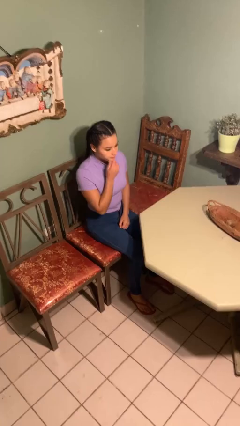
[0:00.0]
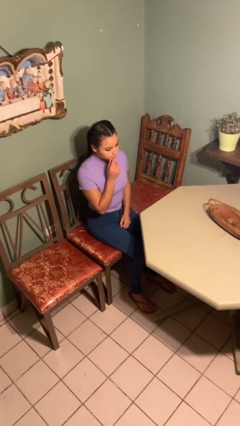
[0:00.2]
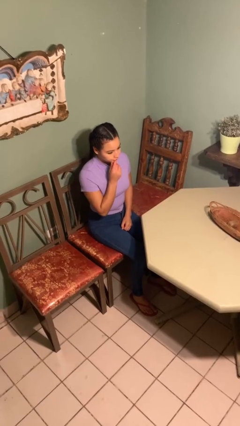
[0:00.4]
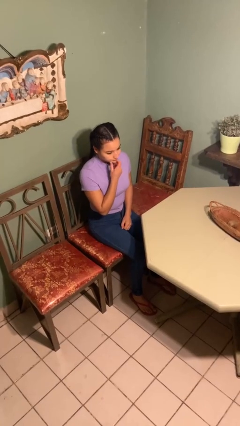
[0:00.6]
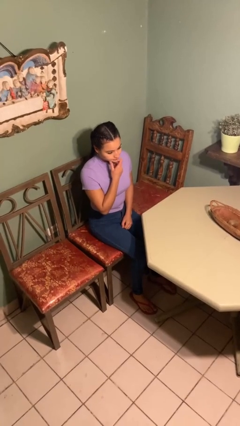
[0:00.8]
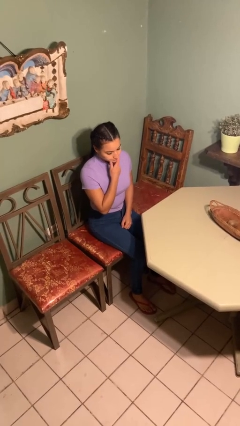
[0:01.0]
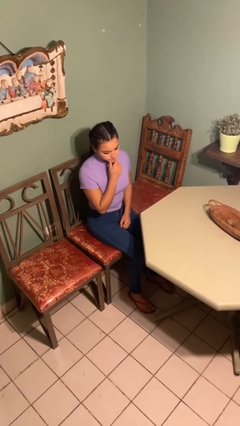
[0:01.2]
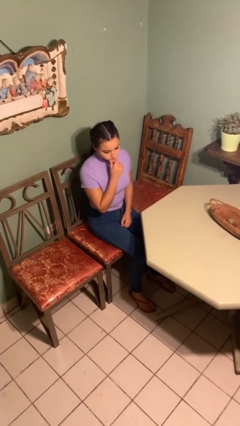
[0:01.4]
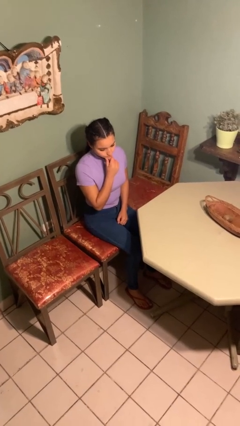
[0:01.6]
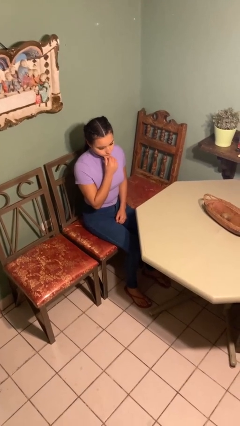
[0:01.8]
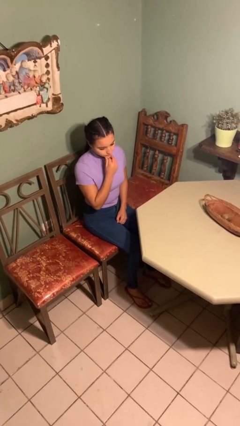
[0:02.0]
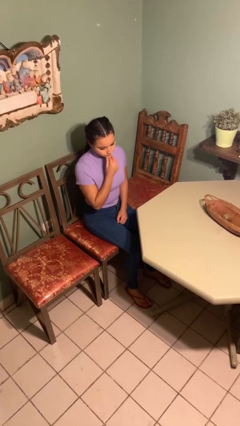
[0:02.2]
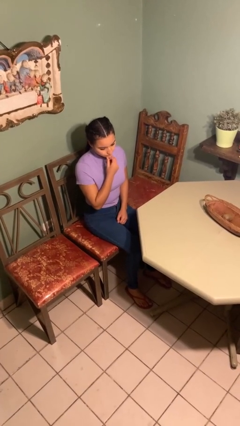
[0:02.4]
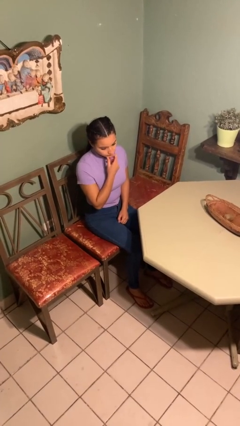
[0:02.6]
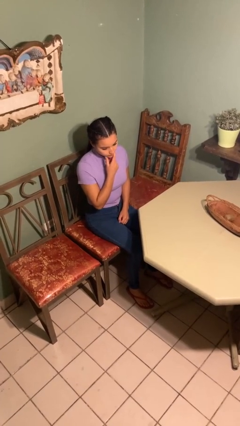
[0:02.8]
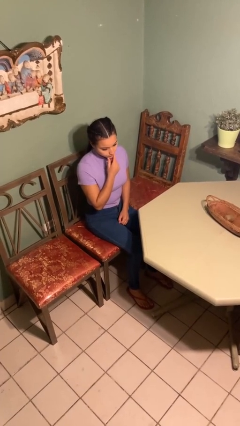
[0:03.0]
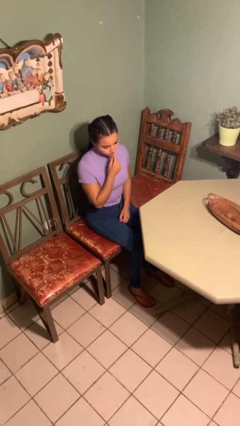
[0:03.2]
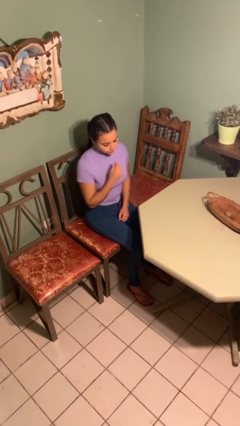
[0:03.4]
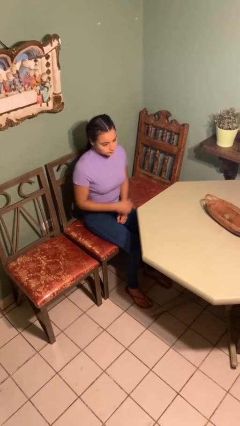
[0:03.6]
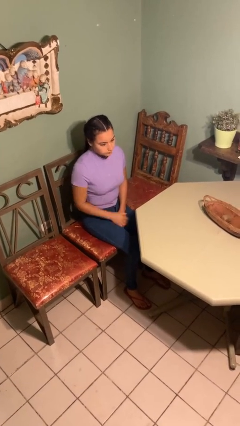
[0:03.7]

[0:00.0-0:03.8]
person strokes chin

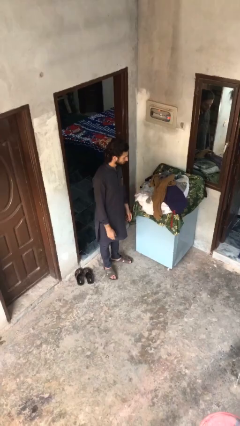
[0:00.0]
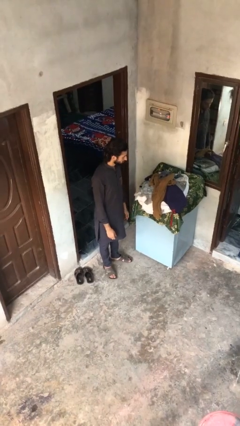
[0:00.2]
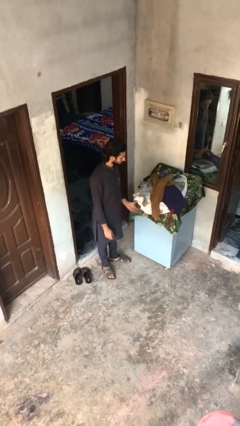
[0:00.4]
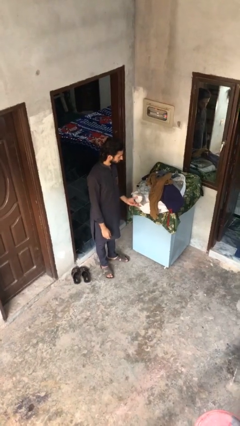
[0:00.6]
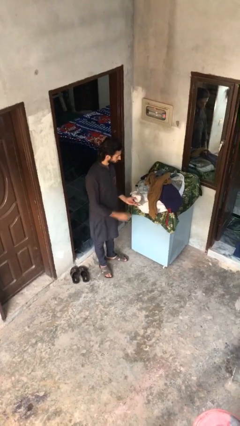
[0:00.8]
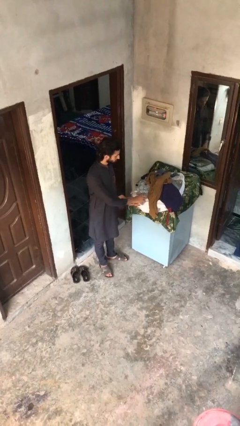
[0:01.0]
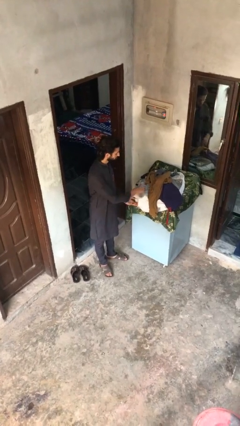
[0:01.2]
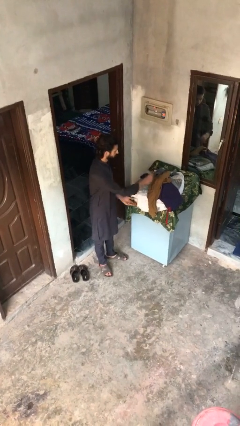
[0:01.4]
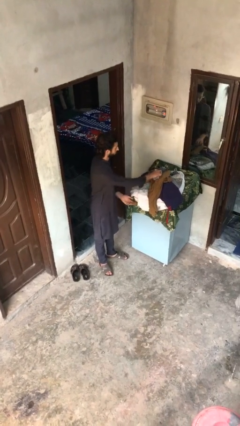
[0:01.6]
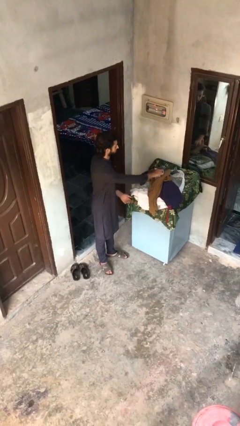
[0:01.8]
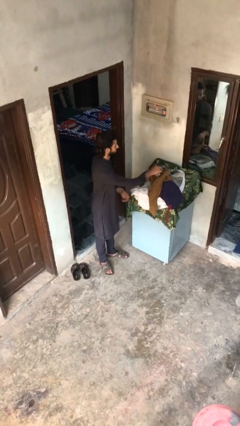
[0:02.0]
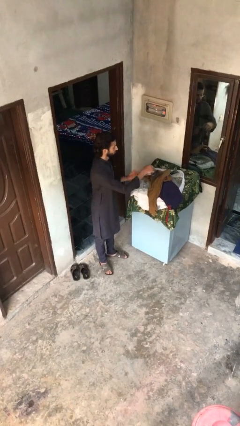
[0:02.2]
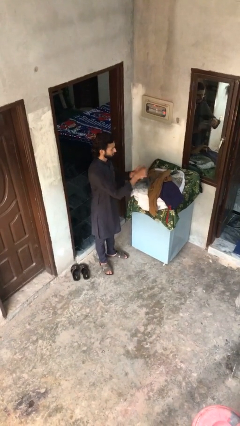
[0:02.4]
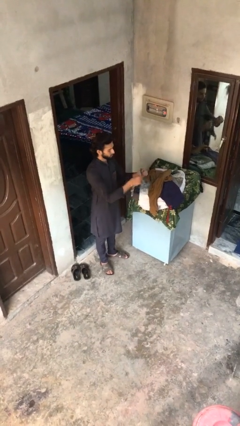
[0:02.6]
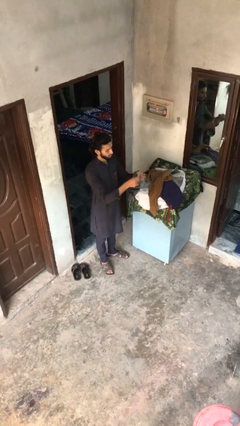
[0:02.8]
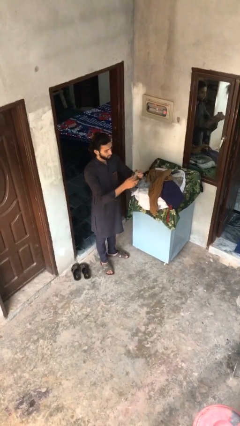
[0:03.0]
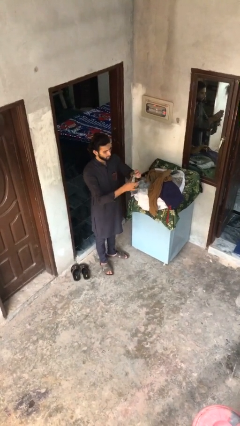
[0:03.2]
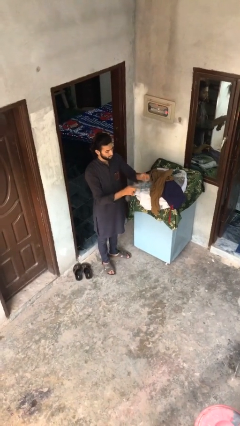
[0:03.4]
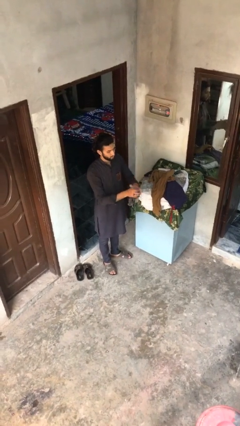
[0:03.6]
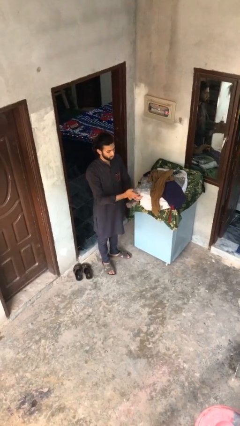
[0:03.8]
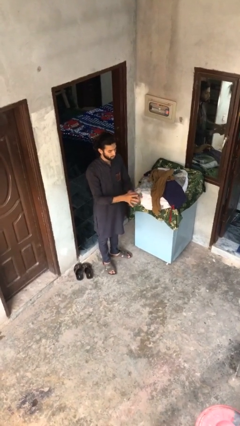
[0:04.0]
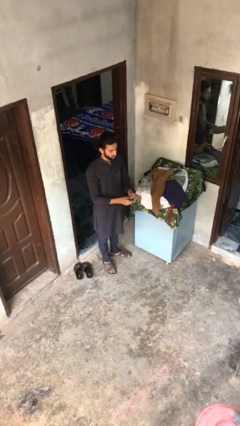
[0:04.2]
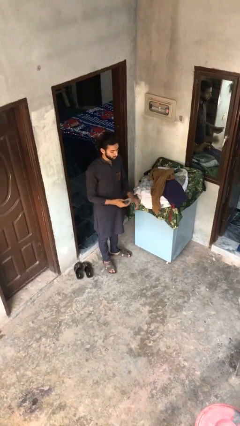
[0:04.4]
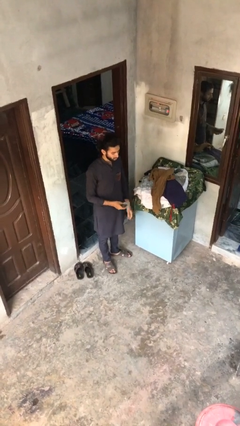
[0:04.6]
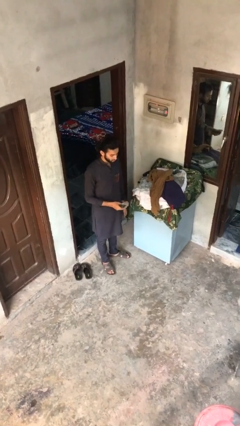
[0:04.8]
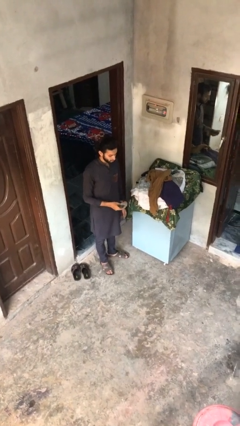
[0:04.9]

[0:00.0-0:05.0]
person folds socks

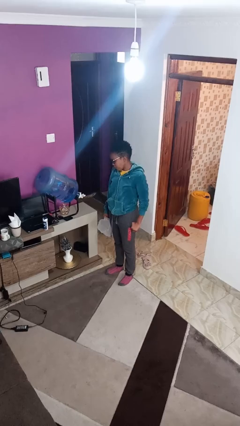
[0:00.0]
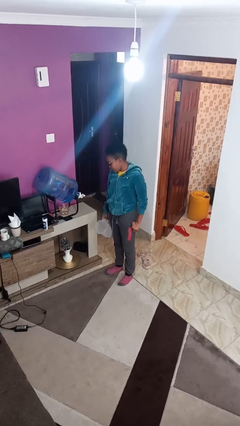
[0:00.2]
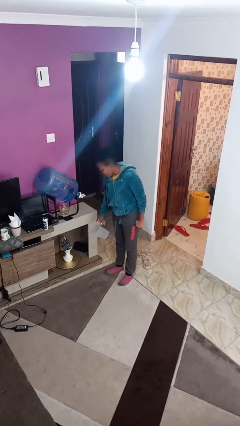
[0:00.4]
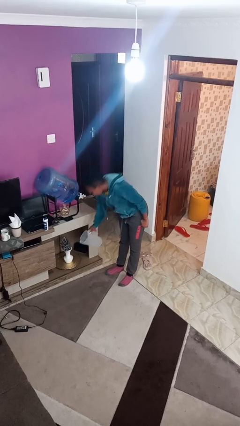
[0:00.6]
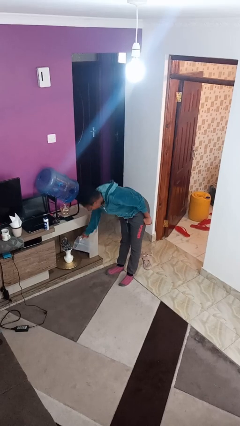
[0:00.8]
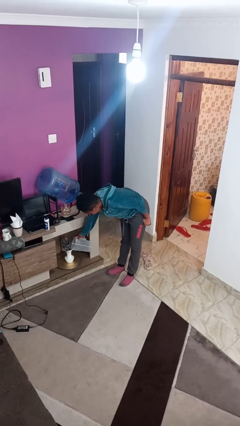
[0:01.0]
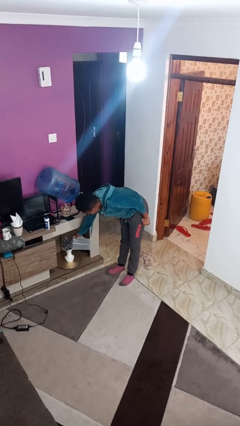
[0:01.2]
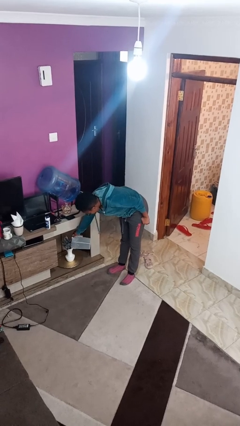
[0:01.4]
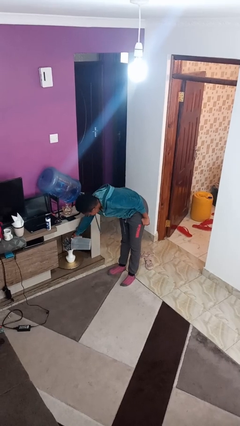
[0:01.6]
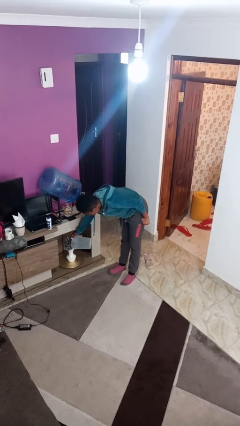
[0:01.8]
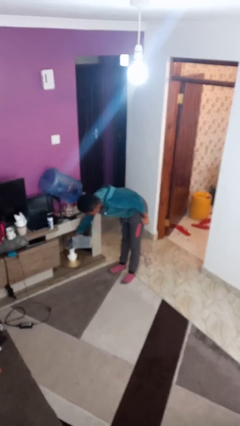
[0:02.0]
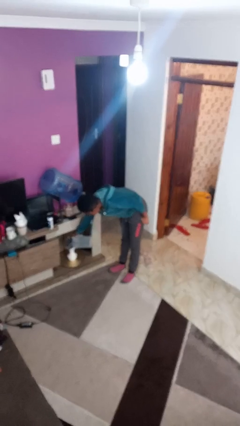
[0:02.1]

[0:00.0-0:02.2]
person waters houseplant

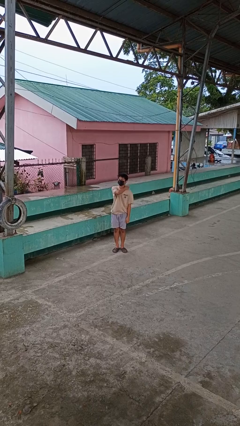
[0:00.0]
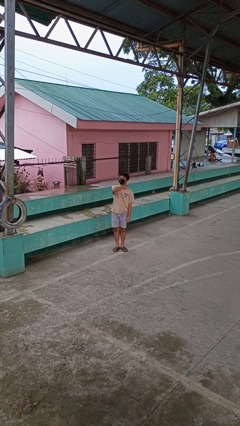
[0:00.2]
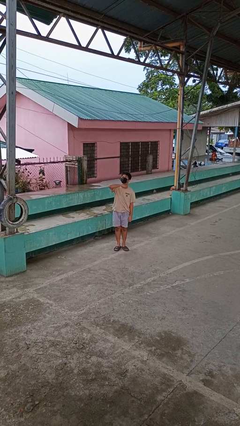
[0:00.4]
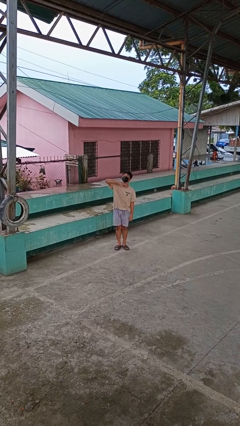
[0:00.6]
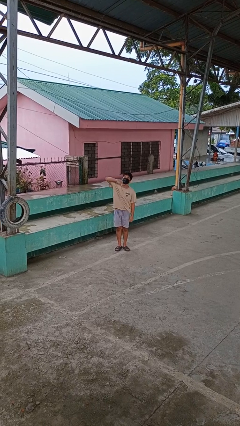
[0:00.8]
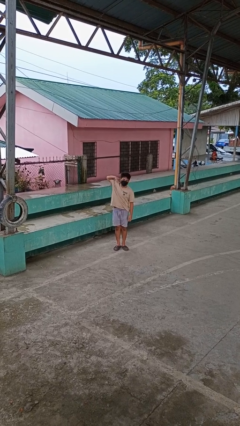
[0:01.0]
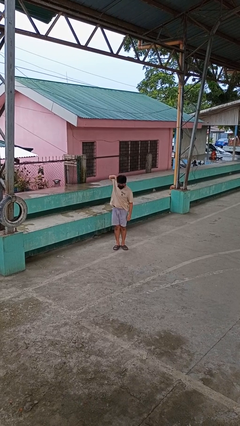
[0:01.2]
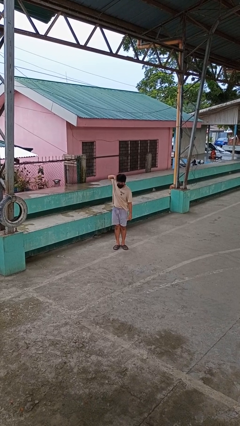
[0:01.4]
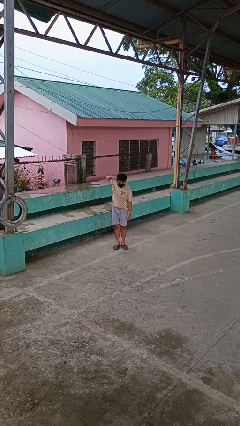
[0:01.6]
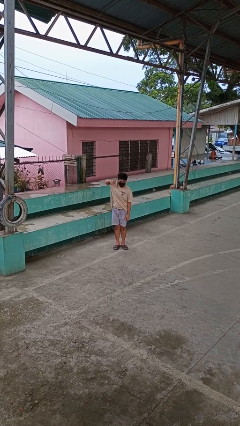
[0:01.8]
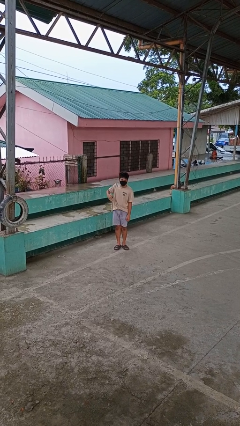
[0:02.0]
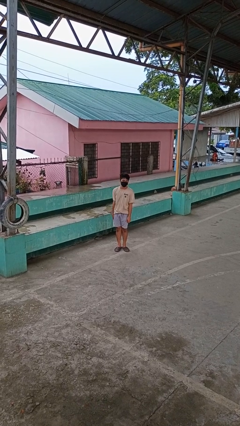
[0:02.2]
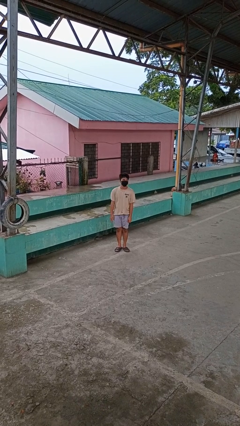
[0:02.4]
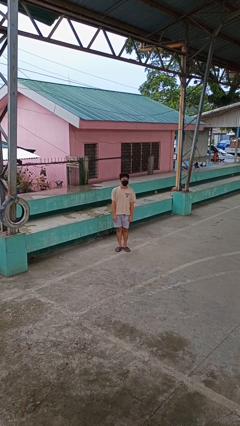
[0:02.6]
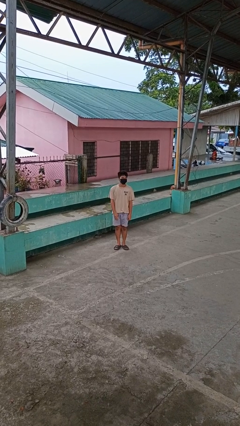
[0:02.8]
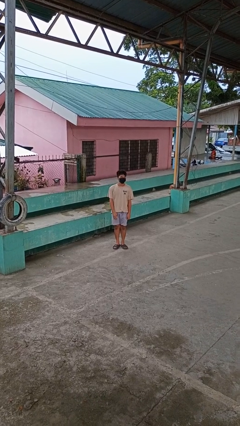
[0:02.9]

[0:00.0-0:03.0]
person gestures cut

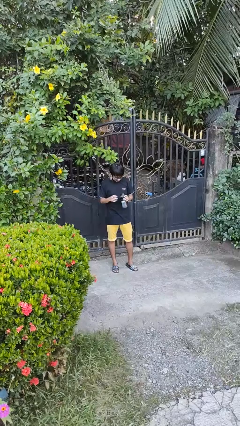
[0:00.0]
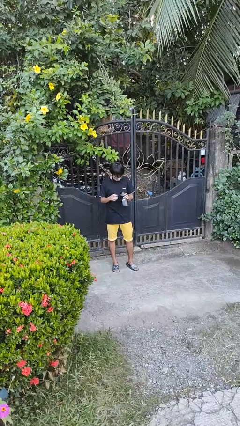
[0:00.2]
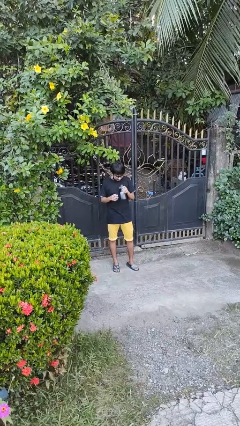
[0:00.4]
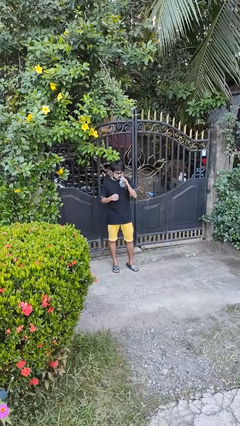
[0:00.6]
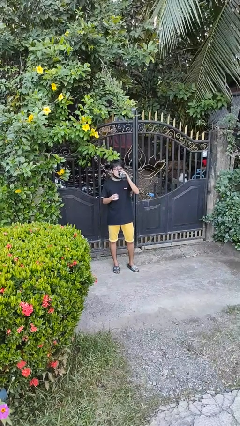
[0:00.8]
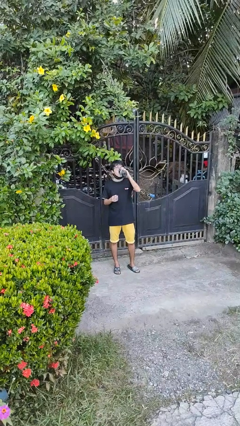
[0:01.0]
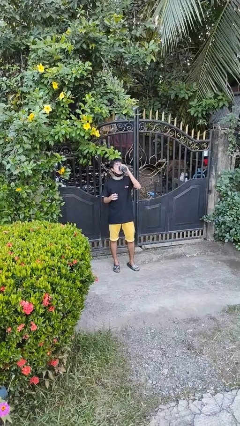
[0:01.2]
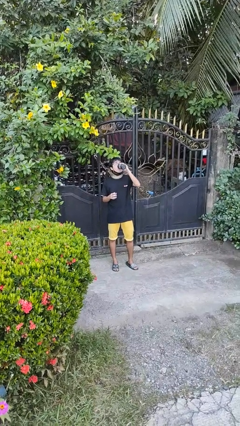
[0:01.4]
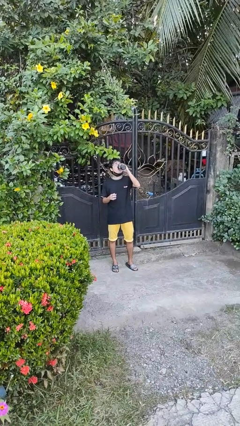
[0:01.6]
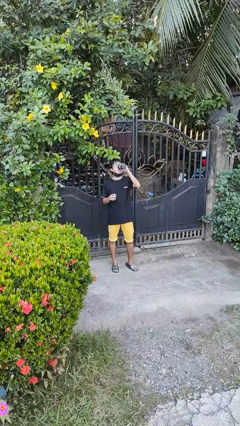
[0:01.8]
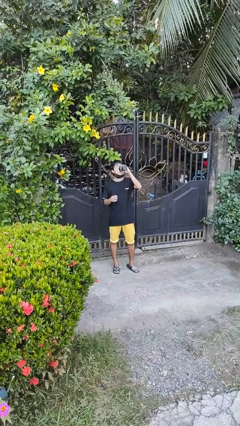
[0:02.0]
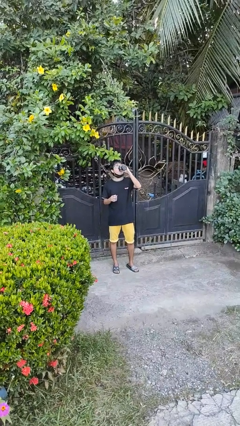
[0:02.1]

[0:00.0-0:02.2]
person drinks from bottle

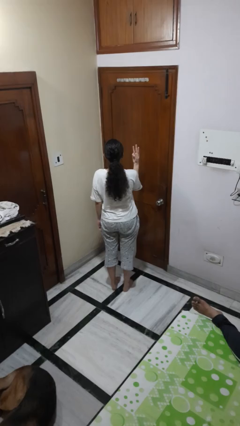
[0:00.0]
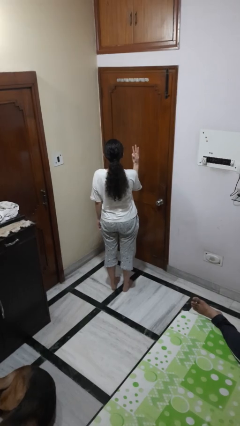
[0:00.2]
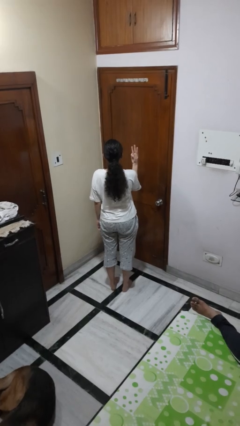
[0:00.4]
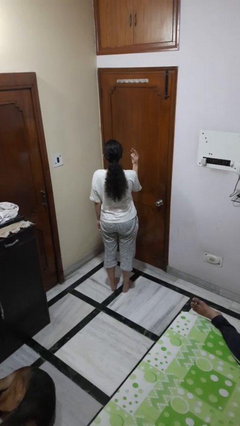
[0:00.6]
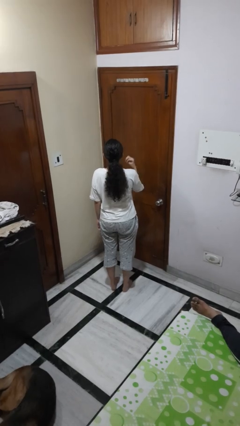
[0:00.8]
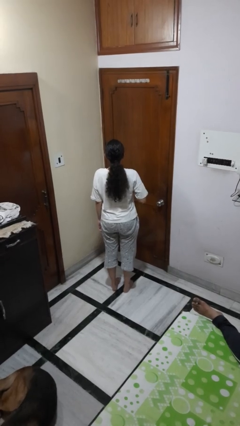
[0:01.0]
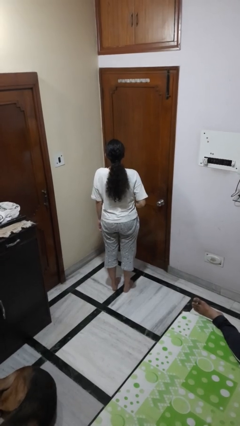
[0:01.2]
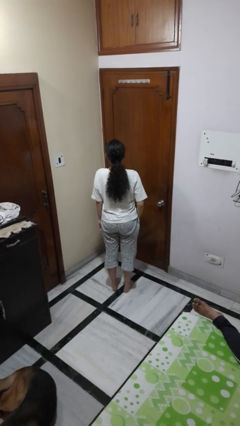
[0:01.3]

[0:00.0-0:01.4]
person gestures number three
